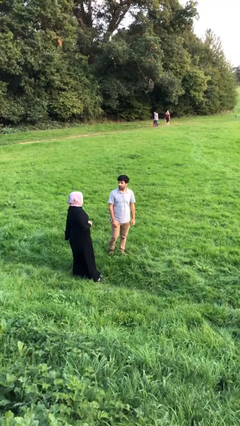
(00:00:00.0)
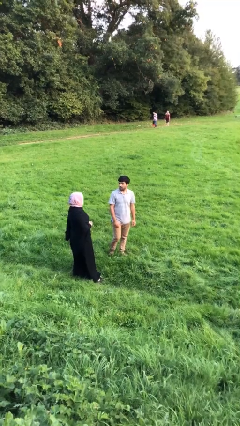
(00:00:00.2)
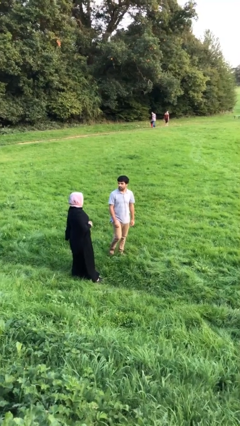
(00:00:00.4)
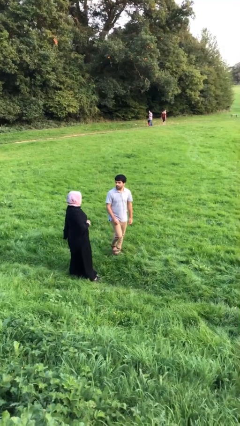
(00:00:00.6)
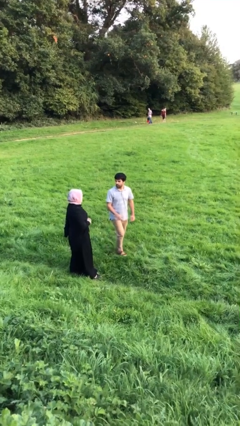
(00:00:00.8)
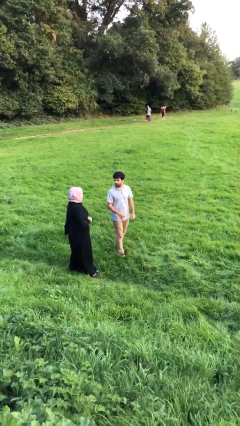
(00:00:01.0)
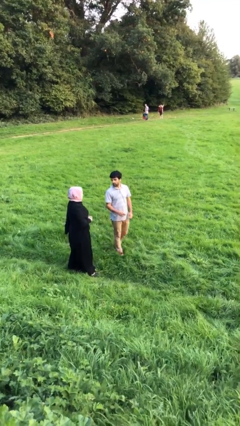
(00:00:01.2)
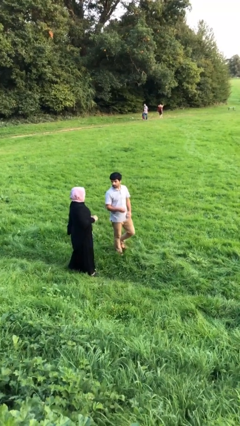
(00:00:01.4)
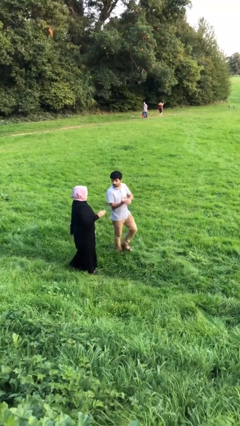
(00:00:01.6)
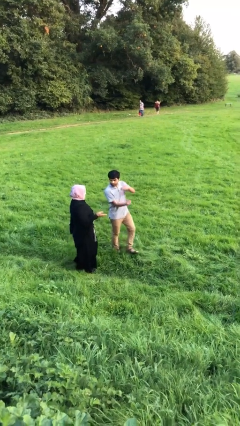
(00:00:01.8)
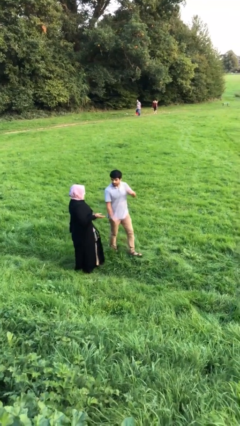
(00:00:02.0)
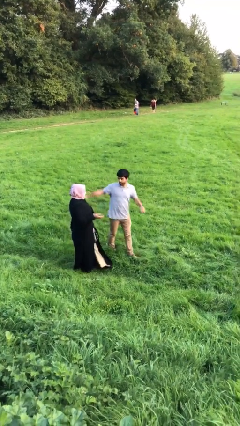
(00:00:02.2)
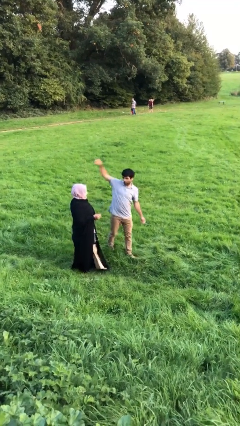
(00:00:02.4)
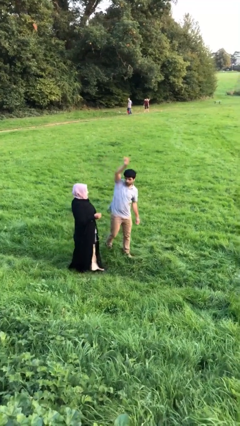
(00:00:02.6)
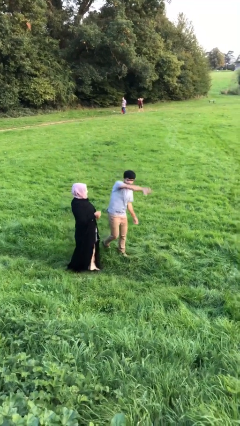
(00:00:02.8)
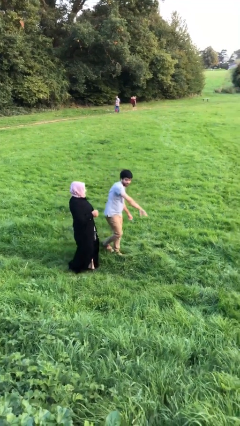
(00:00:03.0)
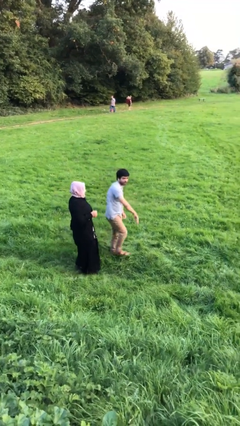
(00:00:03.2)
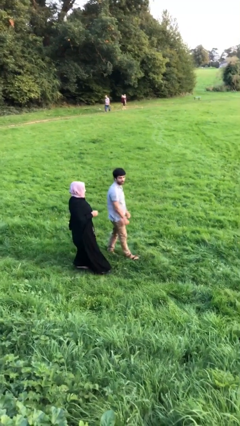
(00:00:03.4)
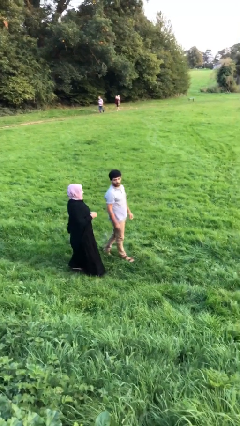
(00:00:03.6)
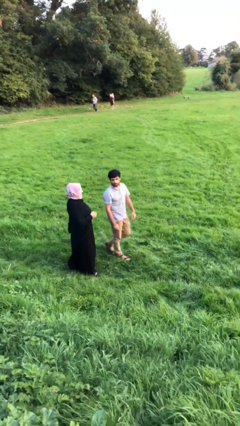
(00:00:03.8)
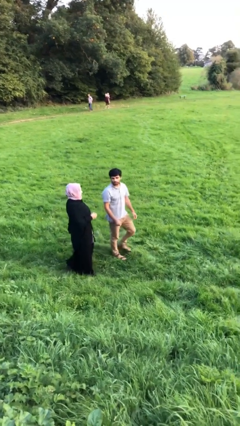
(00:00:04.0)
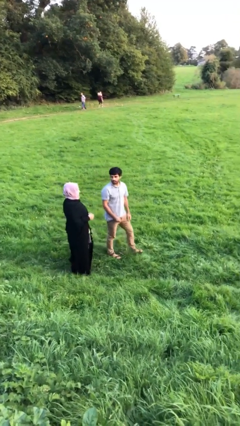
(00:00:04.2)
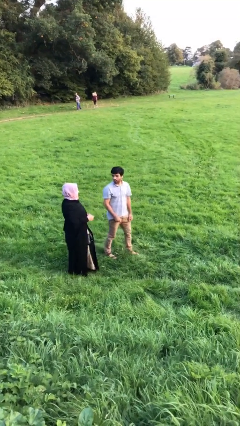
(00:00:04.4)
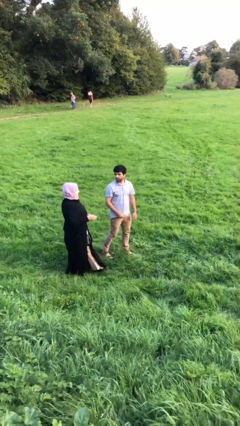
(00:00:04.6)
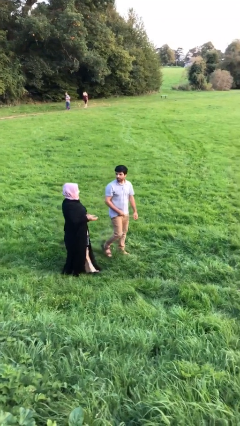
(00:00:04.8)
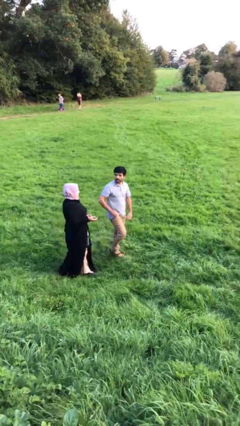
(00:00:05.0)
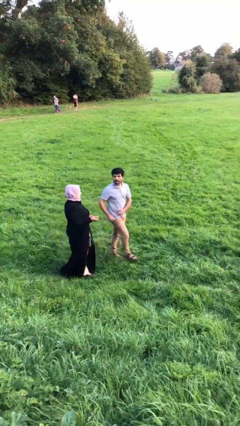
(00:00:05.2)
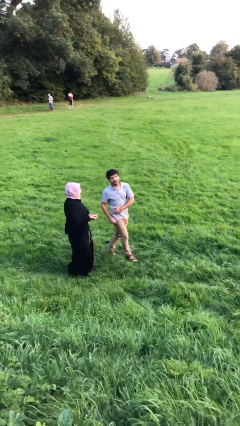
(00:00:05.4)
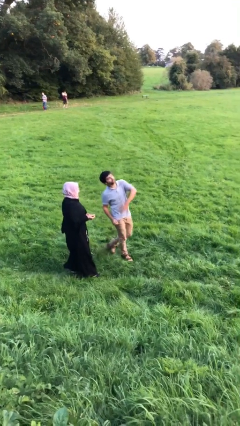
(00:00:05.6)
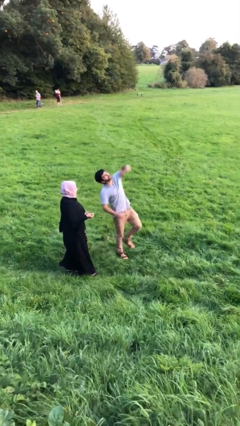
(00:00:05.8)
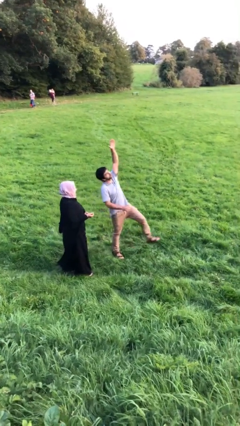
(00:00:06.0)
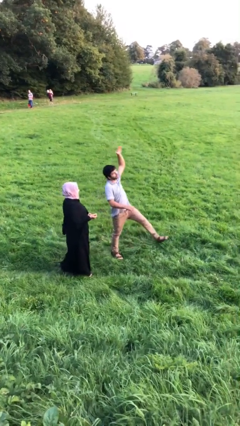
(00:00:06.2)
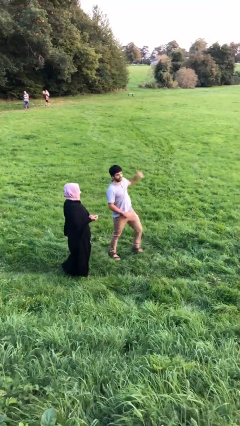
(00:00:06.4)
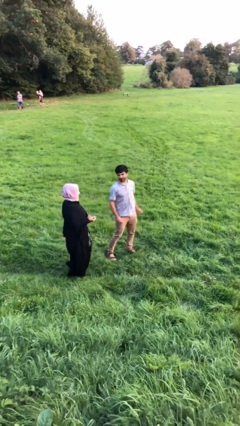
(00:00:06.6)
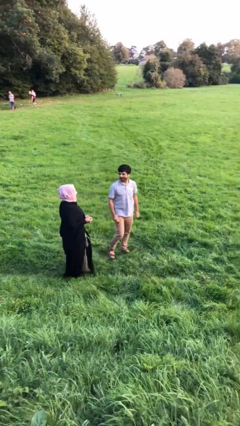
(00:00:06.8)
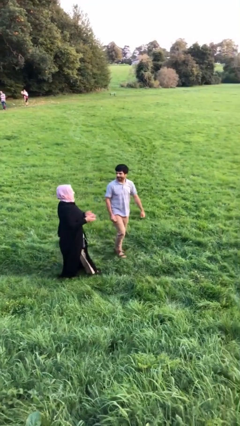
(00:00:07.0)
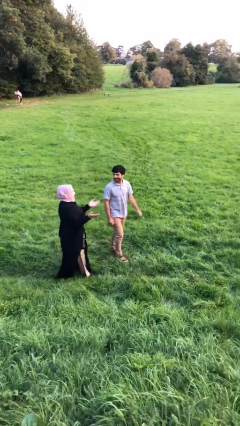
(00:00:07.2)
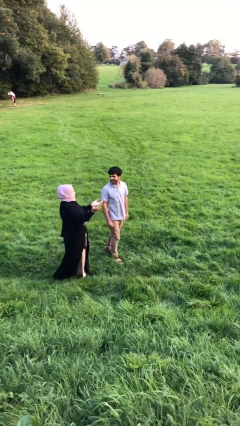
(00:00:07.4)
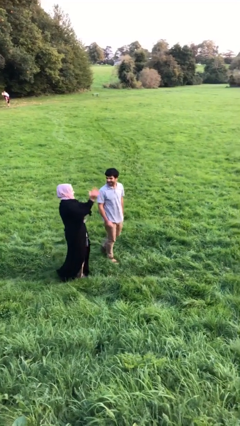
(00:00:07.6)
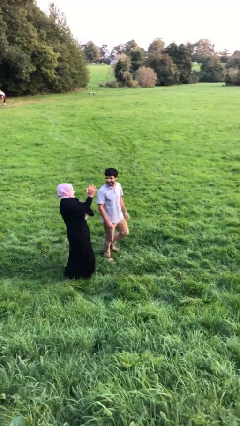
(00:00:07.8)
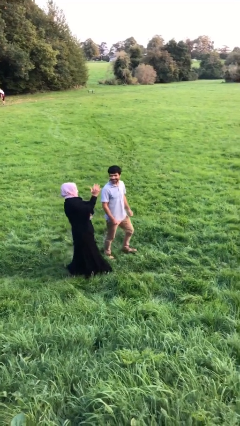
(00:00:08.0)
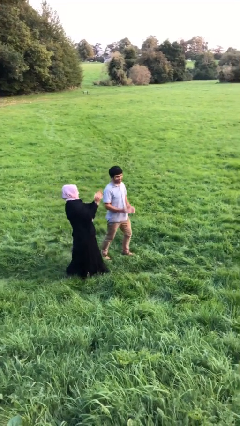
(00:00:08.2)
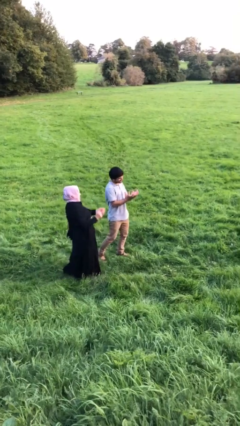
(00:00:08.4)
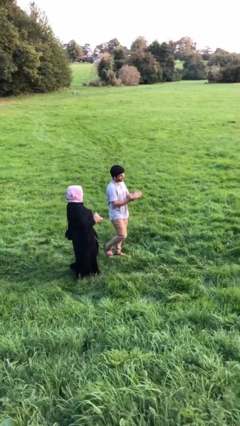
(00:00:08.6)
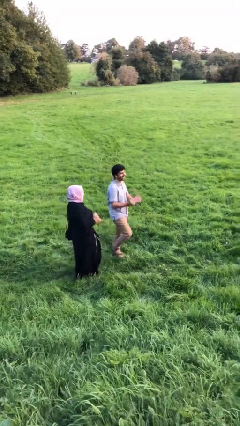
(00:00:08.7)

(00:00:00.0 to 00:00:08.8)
person talks to person

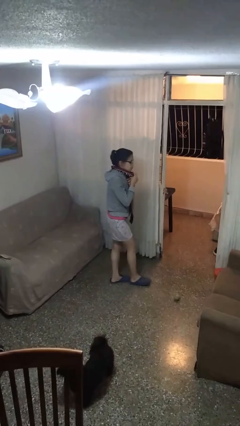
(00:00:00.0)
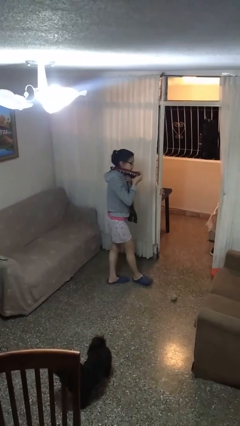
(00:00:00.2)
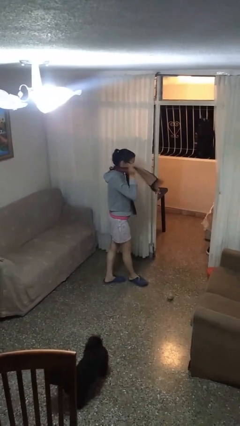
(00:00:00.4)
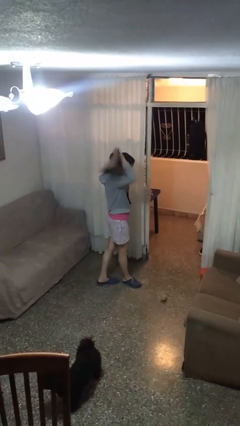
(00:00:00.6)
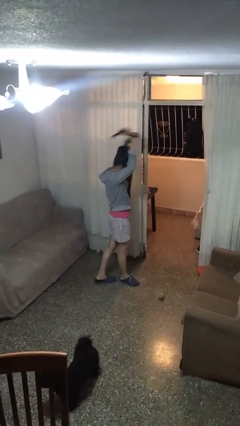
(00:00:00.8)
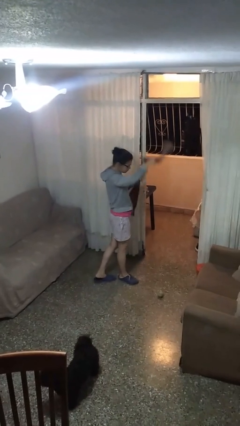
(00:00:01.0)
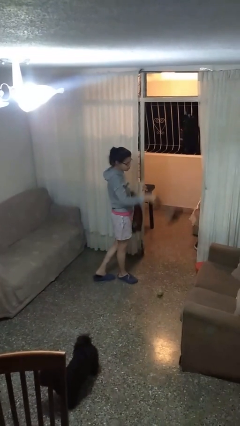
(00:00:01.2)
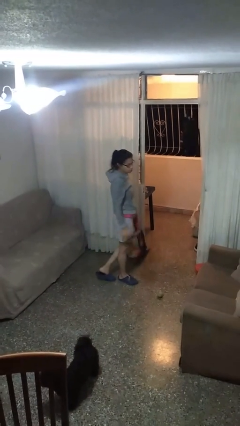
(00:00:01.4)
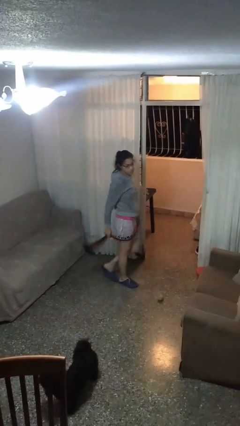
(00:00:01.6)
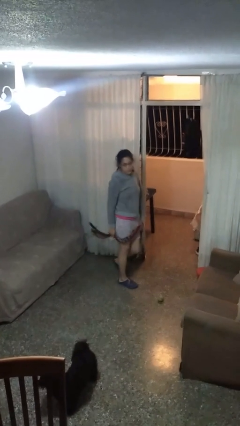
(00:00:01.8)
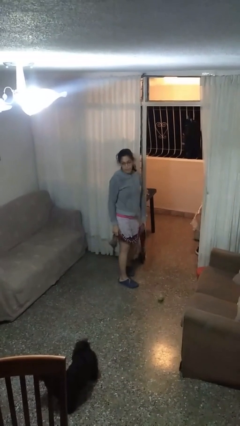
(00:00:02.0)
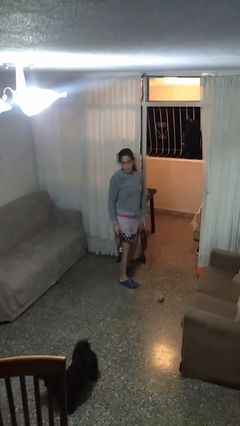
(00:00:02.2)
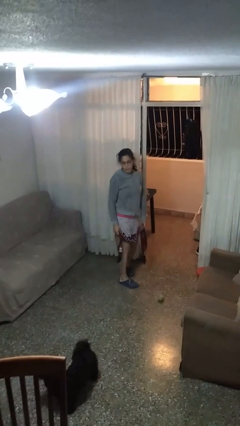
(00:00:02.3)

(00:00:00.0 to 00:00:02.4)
person takes off scarf

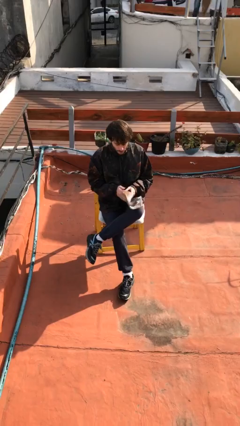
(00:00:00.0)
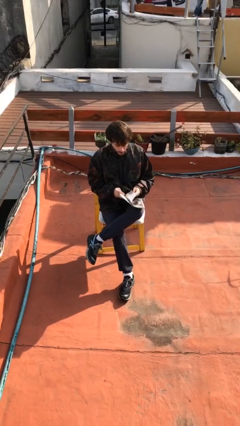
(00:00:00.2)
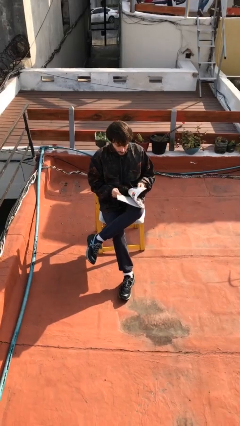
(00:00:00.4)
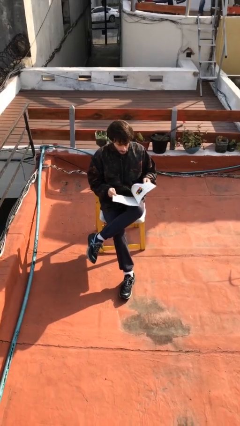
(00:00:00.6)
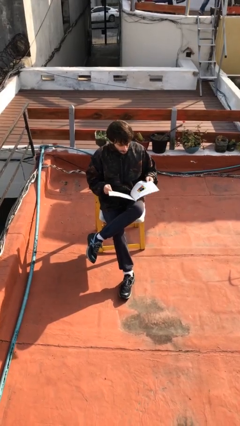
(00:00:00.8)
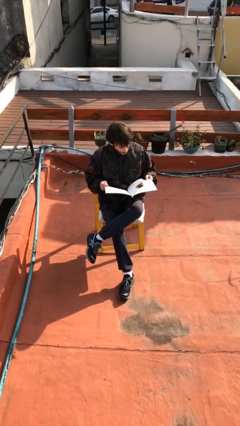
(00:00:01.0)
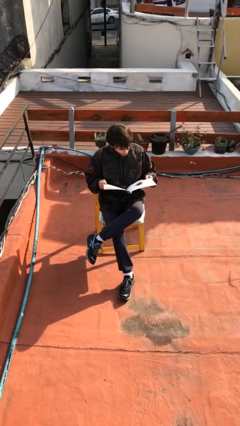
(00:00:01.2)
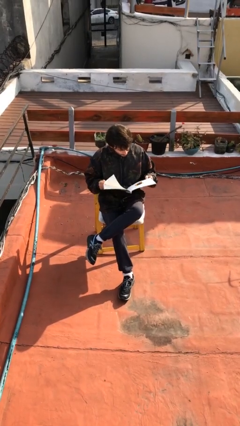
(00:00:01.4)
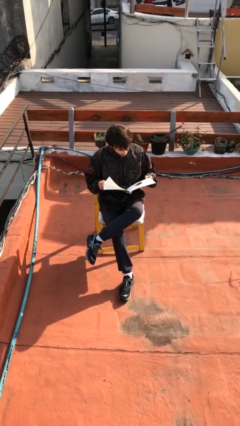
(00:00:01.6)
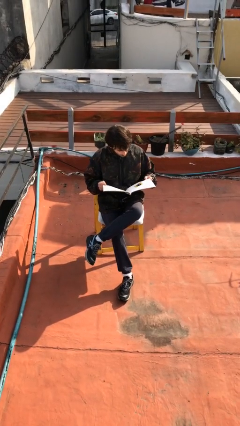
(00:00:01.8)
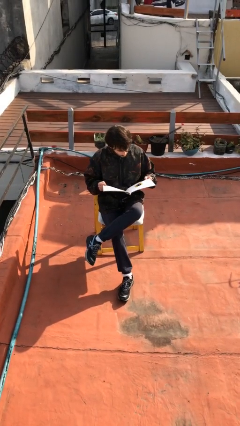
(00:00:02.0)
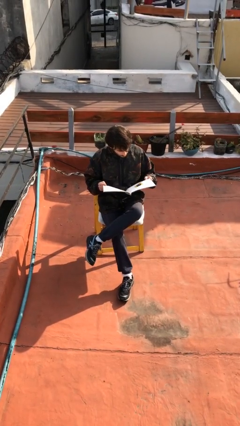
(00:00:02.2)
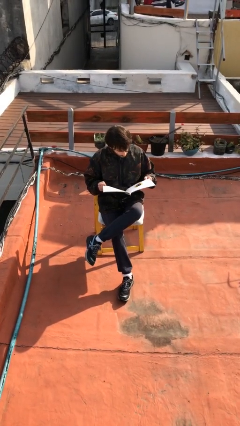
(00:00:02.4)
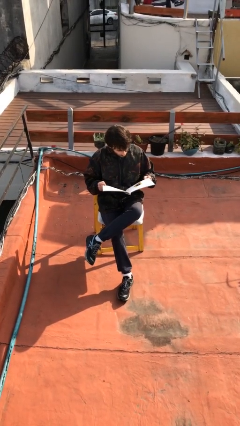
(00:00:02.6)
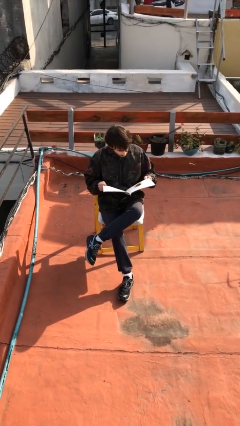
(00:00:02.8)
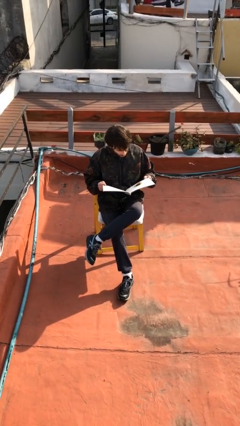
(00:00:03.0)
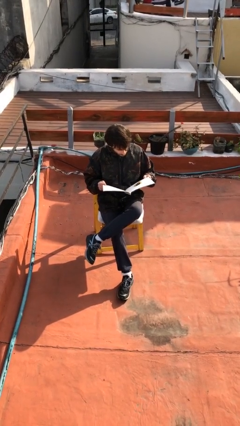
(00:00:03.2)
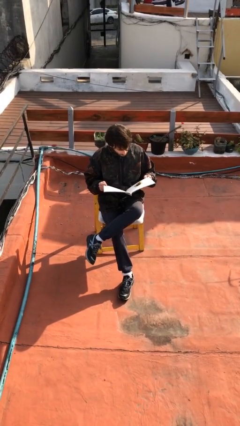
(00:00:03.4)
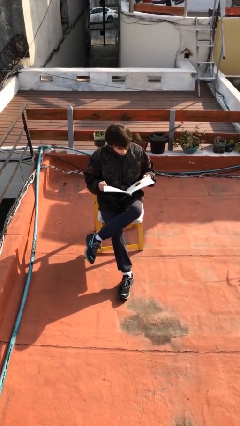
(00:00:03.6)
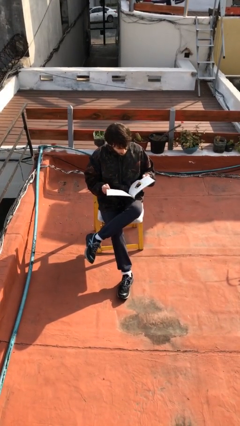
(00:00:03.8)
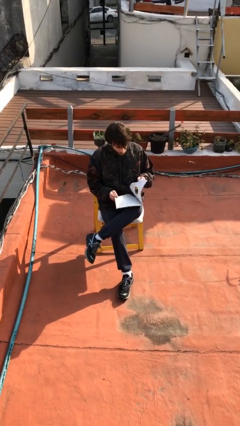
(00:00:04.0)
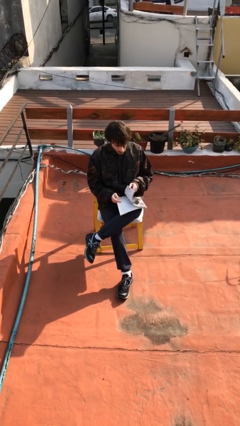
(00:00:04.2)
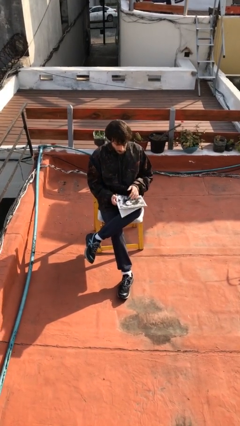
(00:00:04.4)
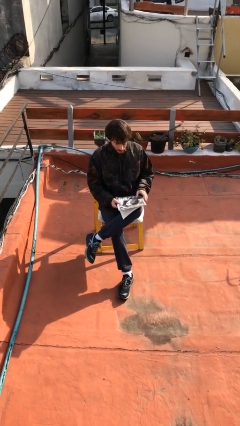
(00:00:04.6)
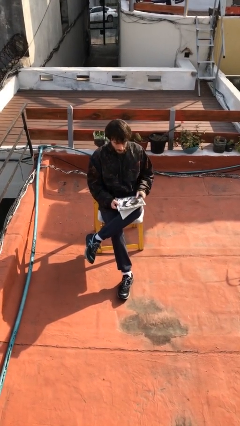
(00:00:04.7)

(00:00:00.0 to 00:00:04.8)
person reads magazine

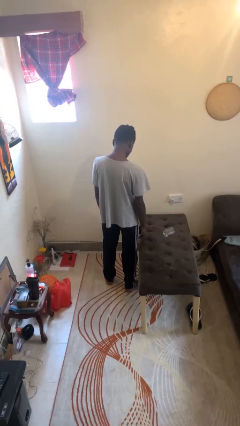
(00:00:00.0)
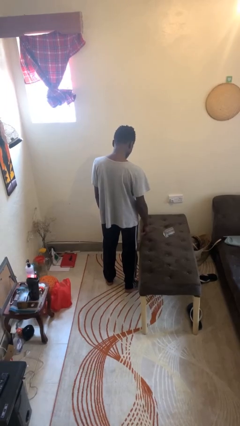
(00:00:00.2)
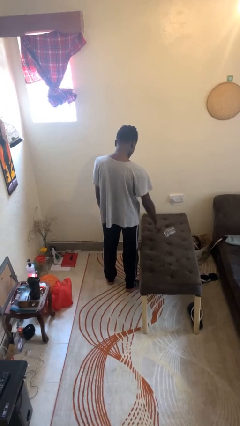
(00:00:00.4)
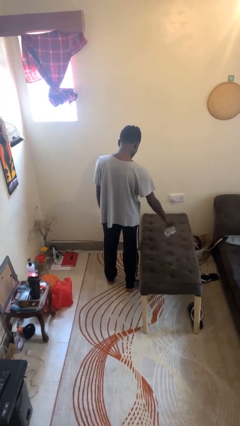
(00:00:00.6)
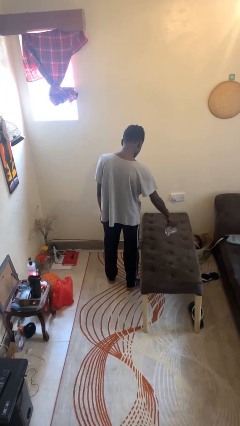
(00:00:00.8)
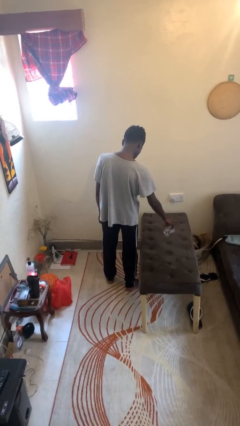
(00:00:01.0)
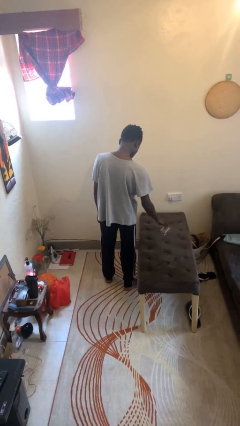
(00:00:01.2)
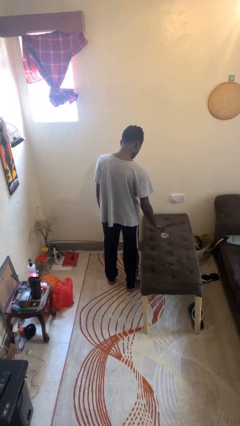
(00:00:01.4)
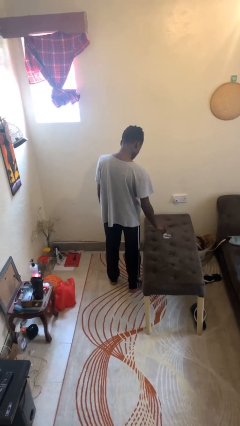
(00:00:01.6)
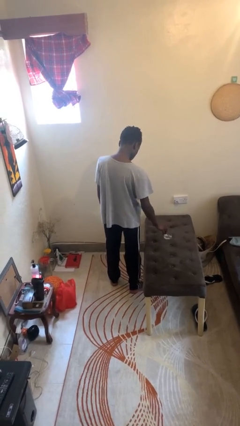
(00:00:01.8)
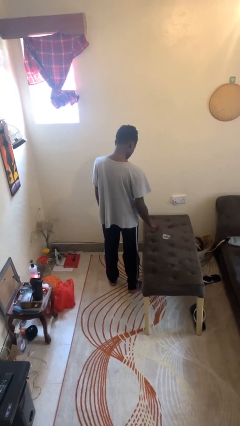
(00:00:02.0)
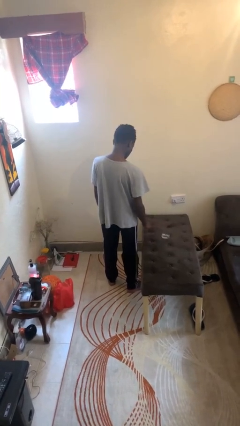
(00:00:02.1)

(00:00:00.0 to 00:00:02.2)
person sets upright glass
